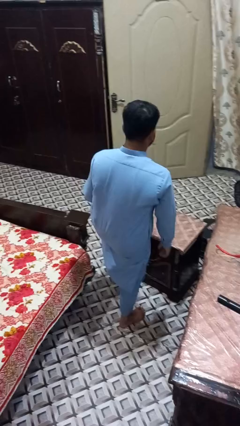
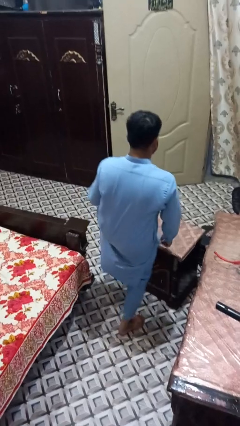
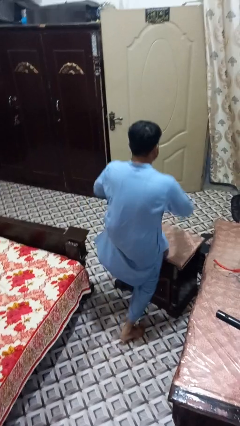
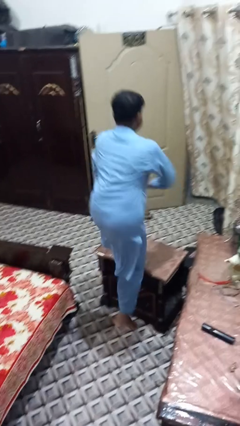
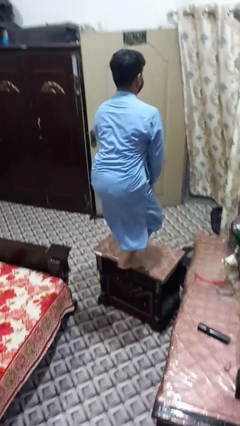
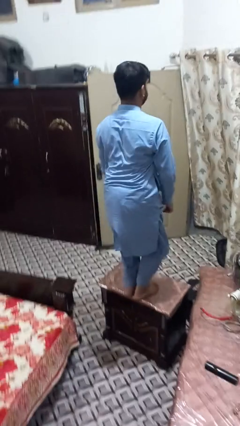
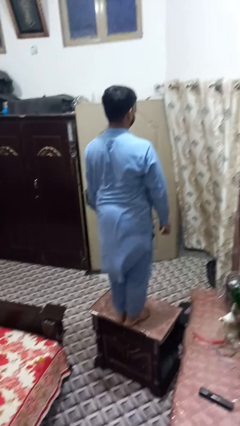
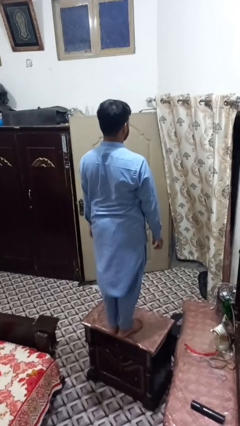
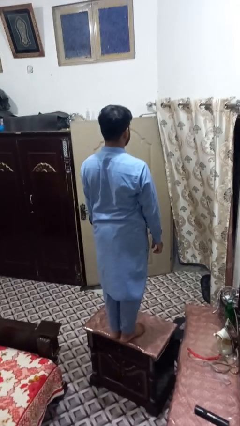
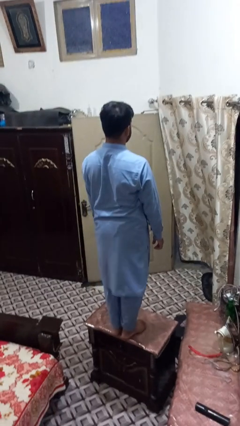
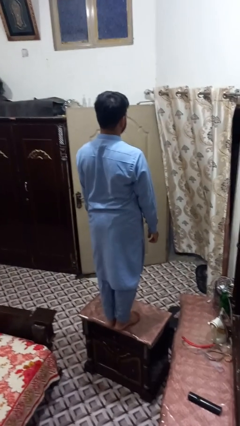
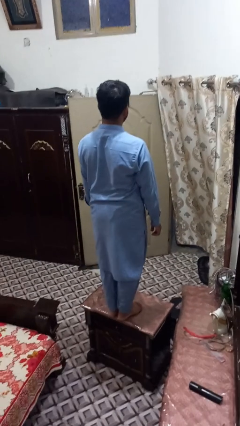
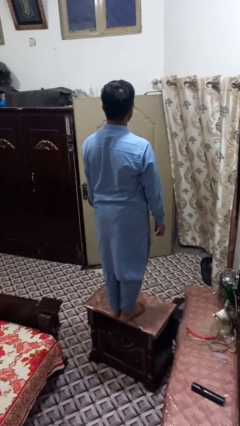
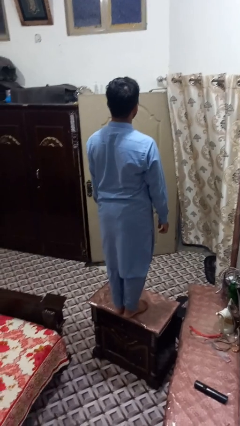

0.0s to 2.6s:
person climbs on table

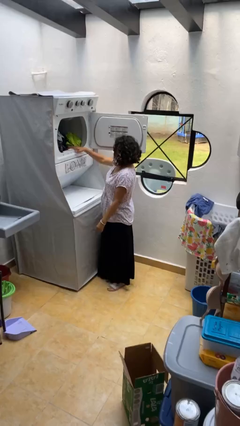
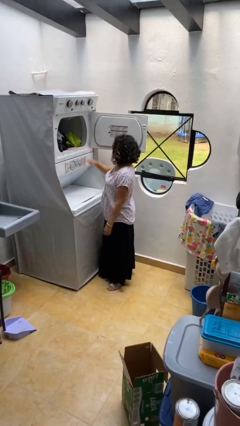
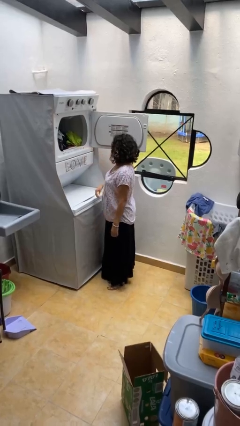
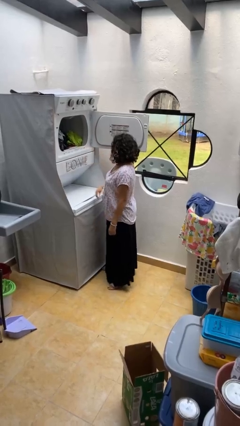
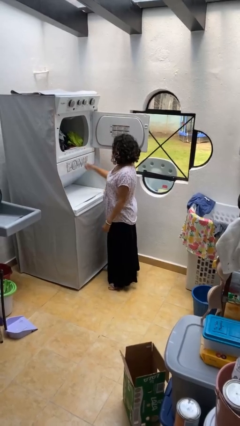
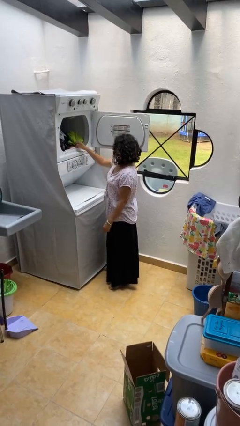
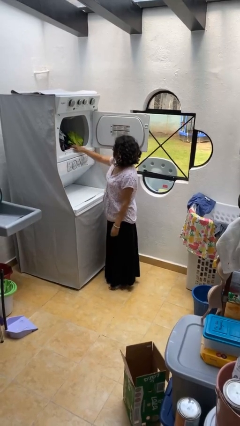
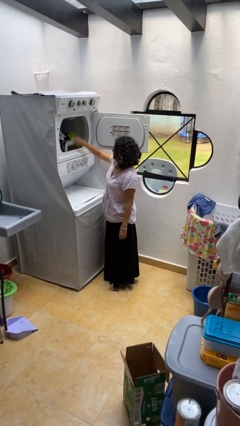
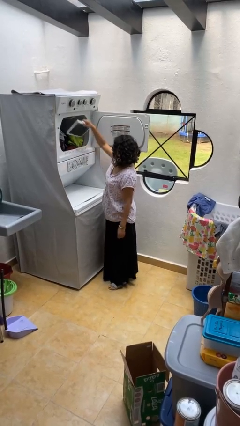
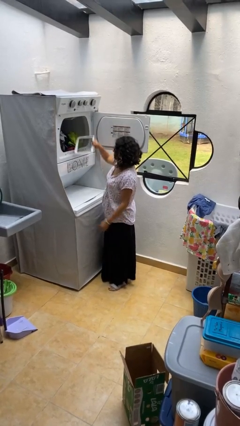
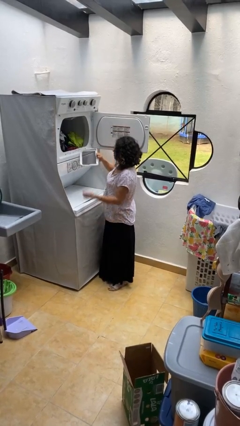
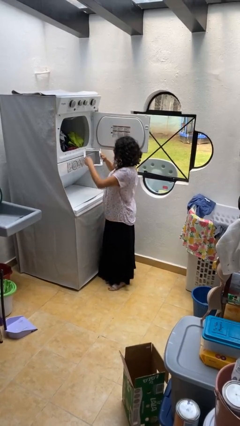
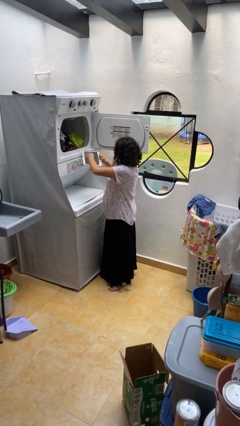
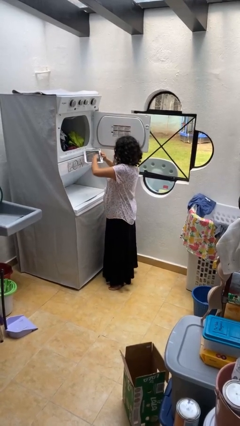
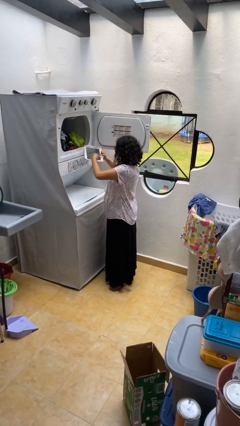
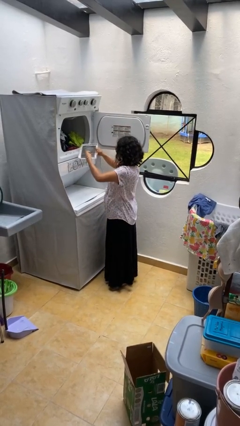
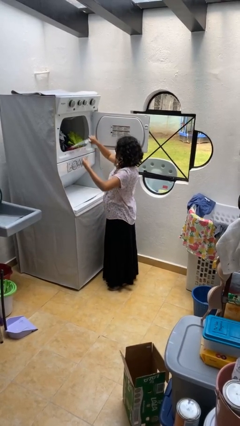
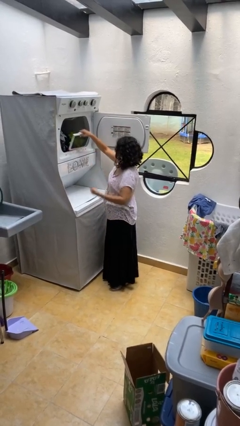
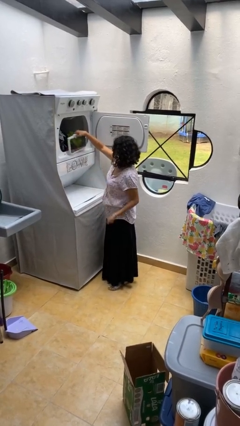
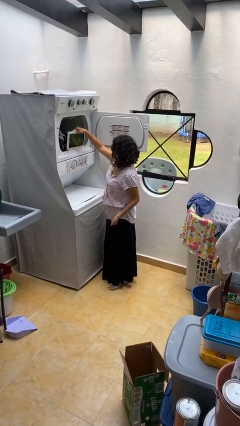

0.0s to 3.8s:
person cleans dryer lint trap

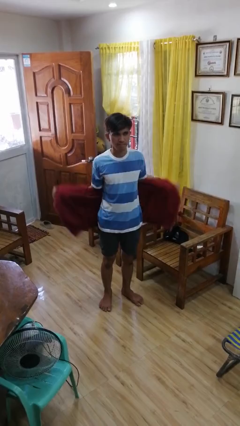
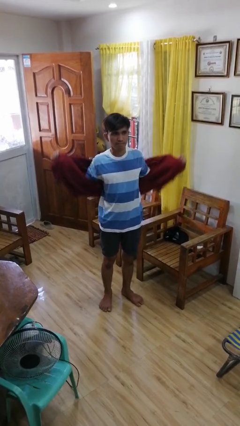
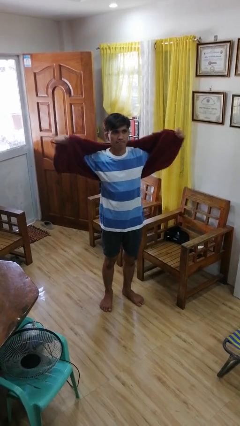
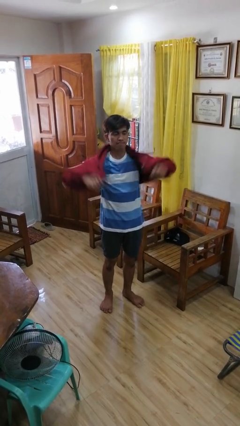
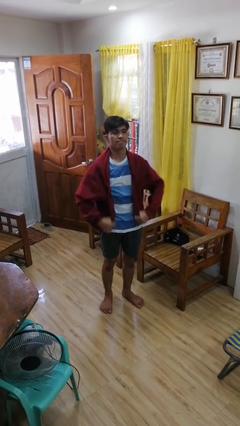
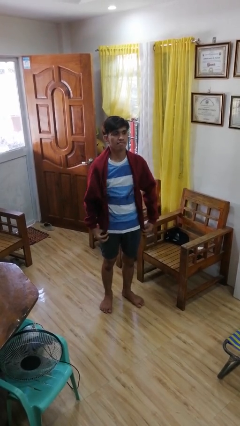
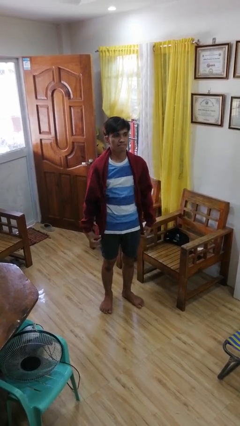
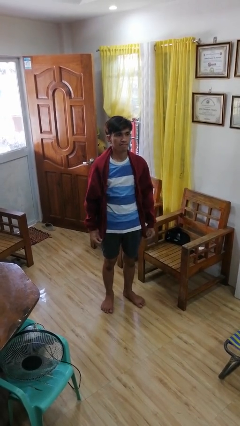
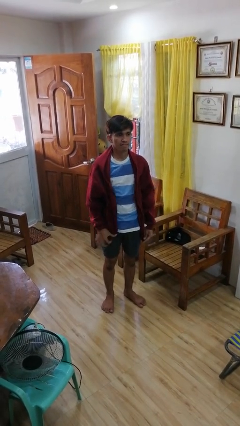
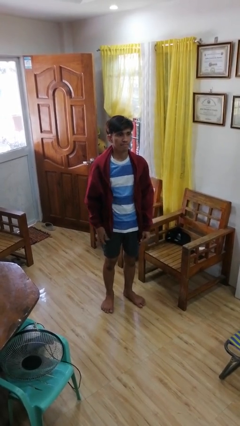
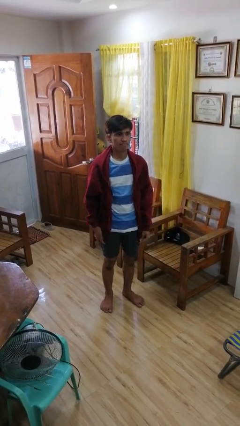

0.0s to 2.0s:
person puts on jacket

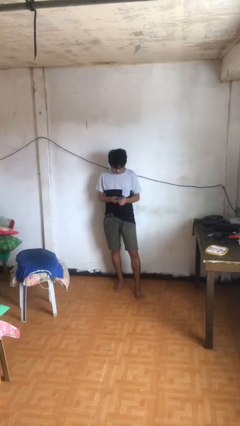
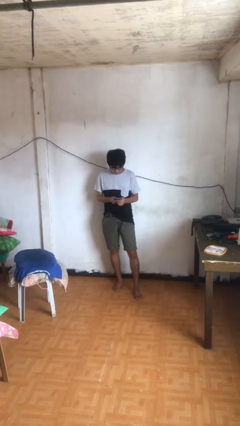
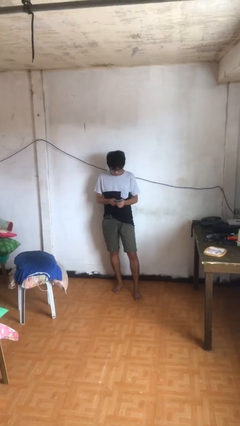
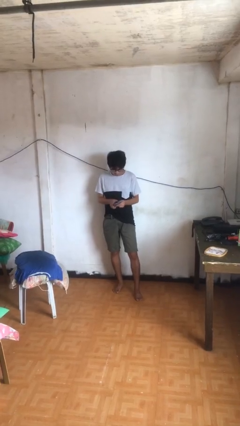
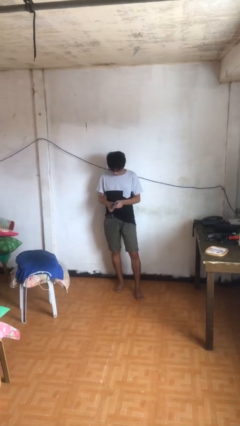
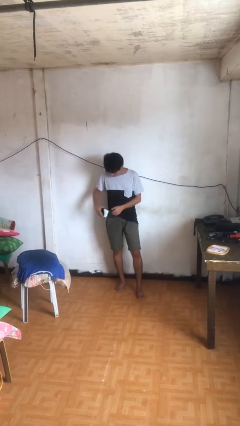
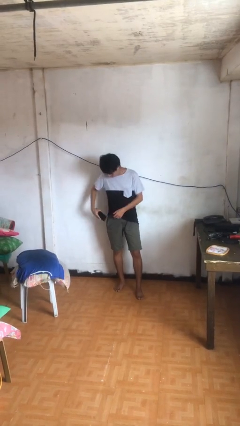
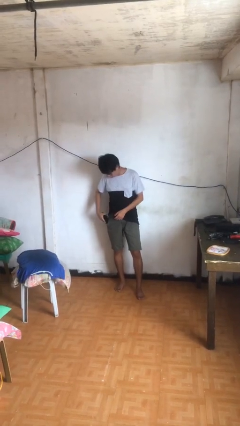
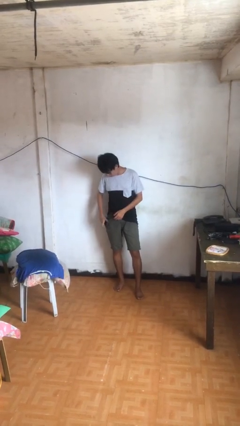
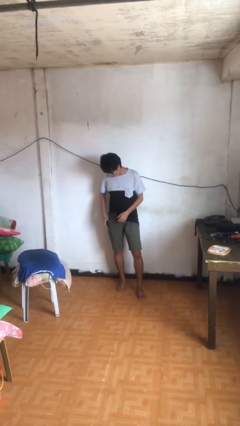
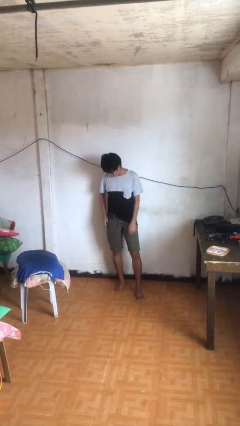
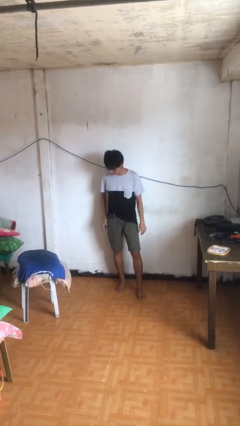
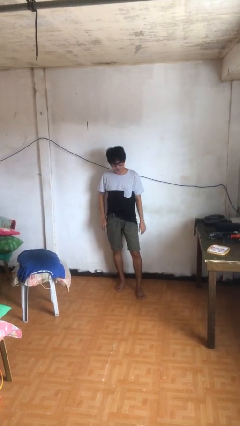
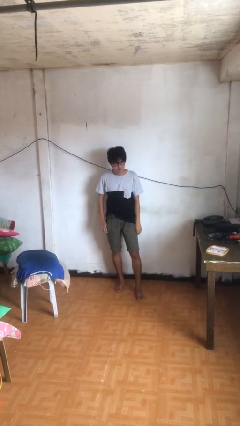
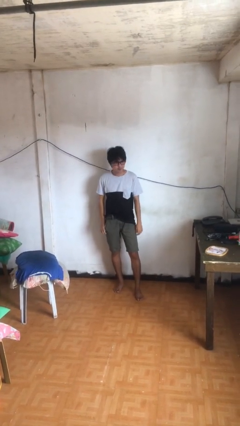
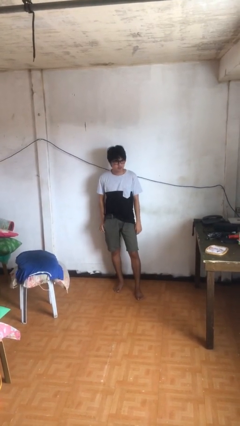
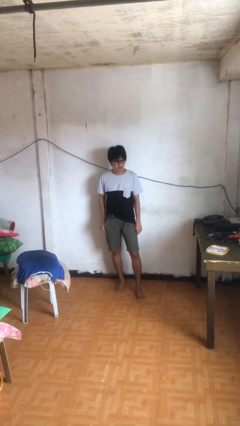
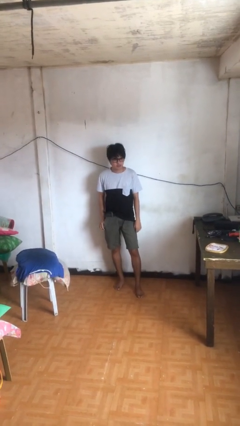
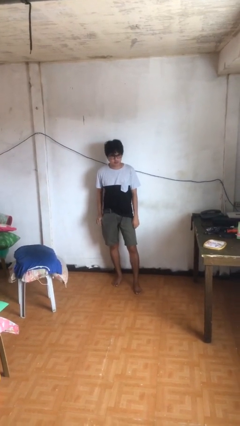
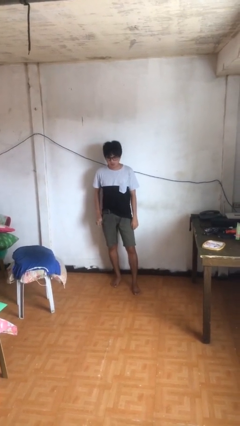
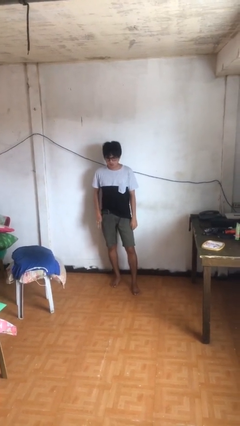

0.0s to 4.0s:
person puts phone into pocket

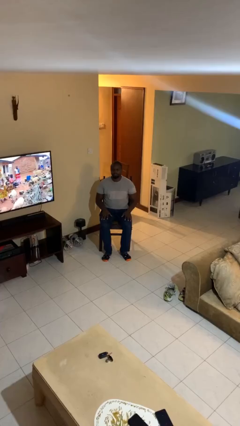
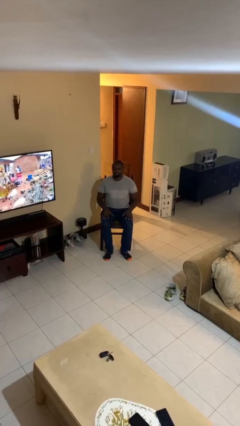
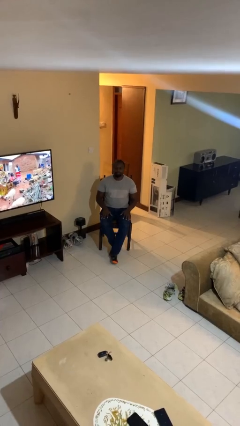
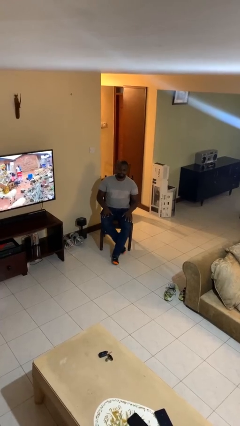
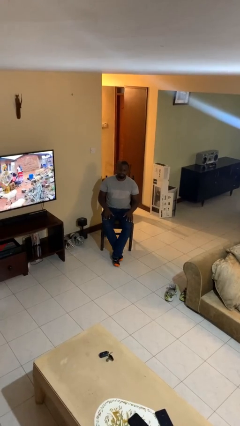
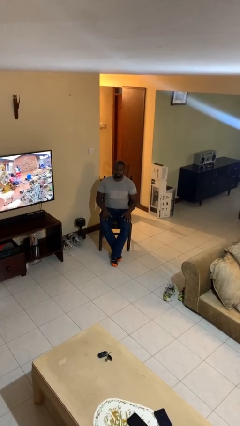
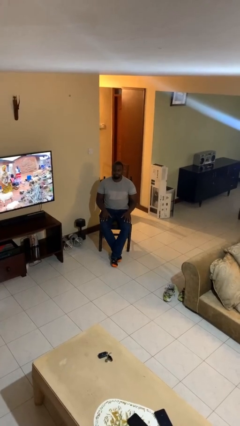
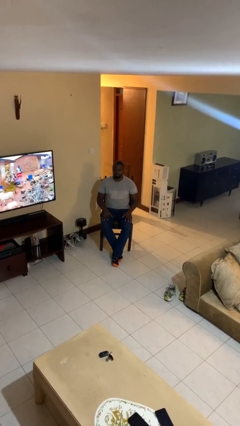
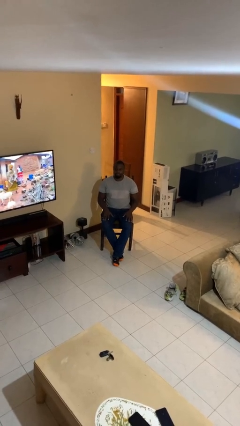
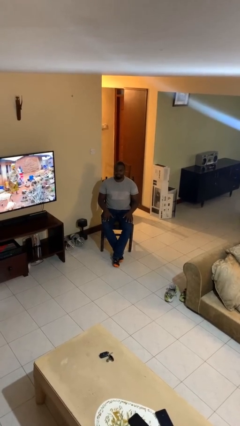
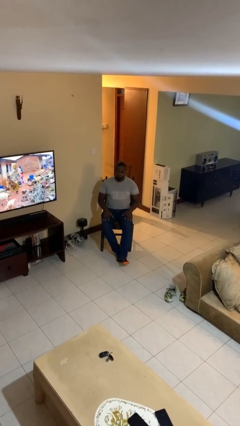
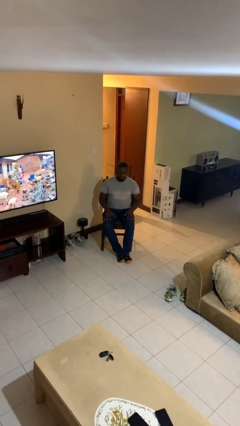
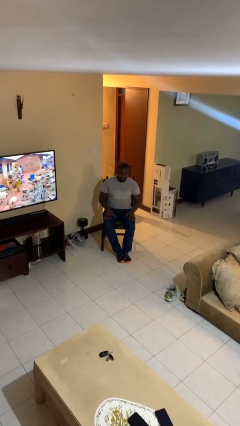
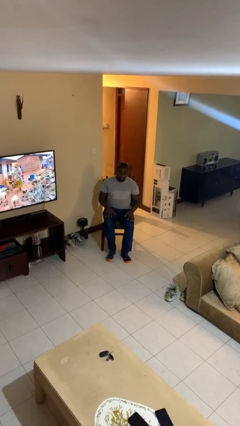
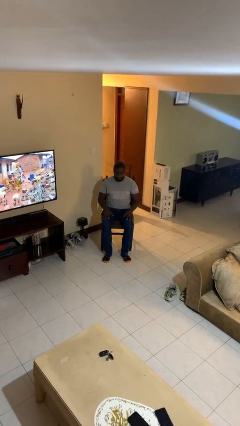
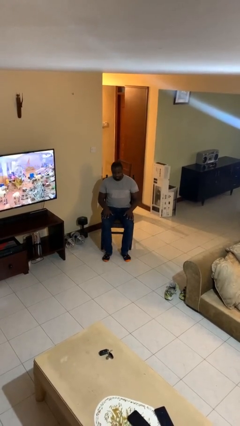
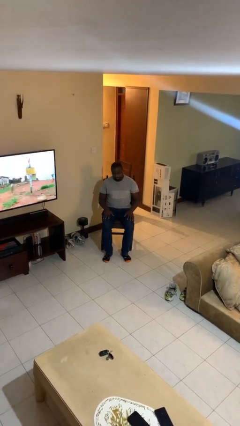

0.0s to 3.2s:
person crosses legs

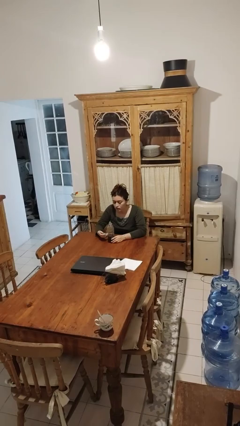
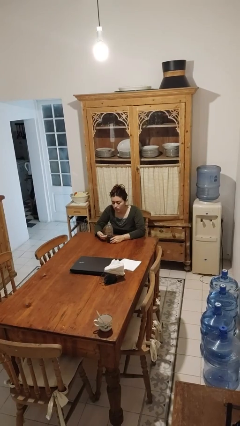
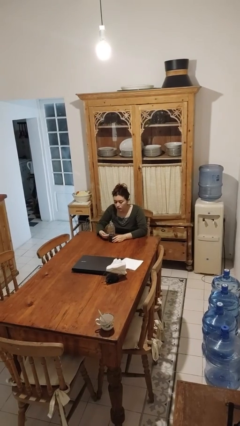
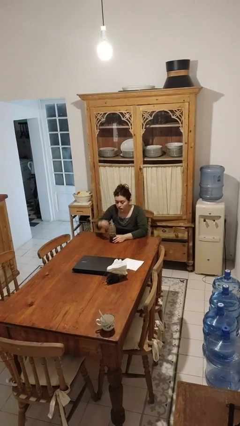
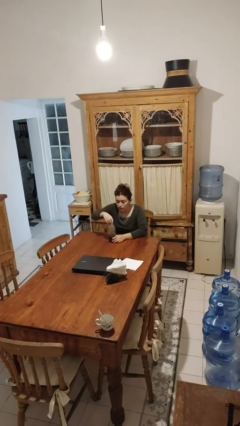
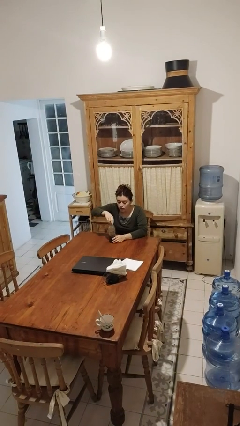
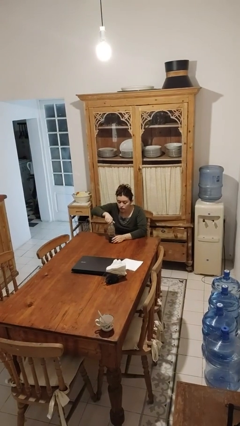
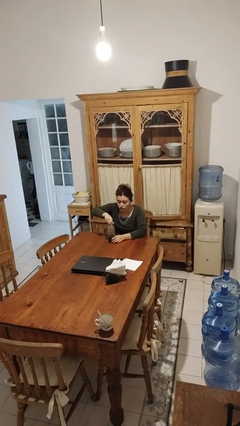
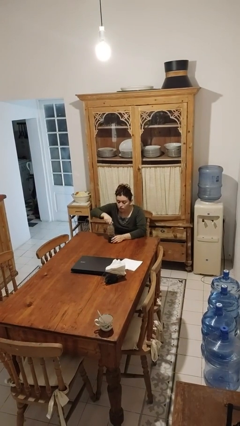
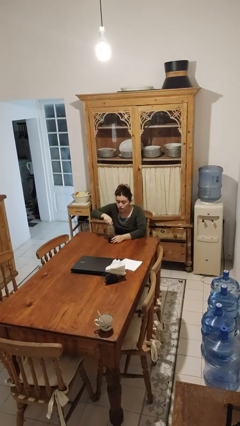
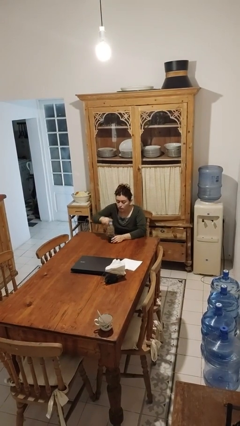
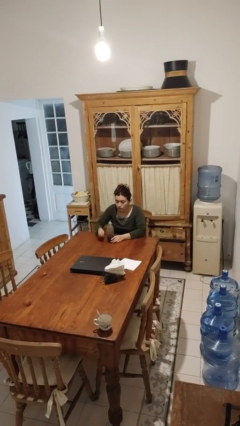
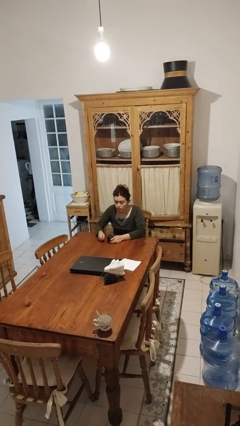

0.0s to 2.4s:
person screws lid to bottle
